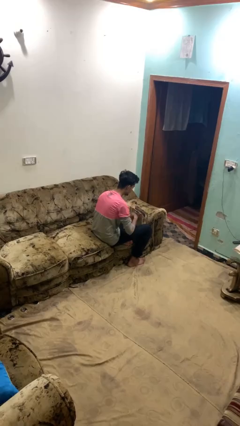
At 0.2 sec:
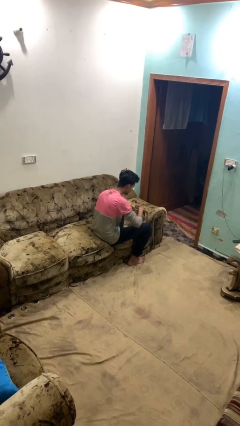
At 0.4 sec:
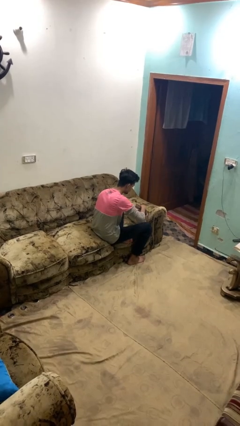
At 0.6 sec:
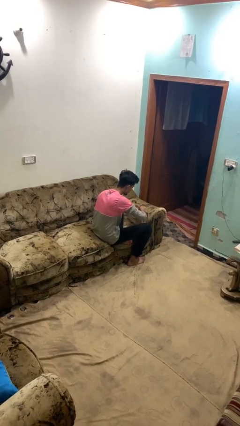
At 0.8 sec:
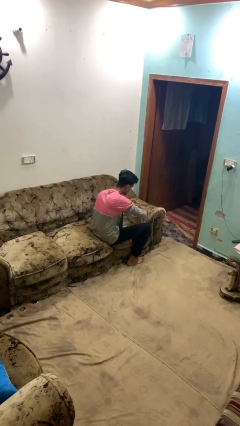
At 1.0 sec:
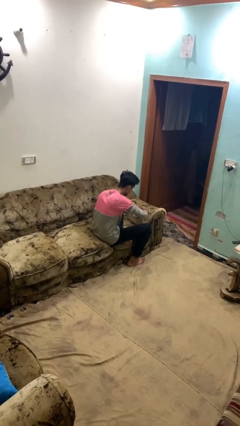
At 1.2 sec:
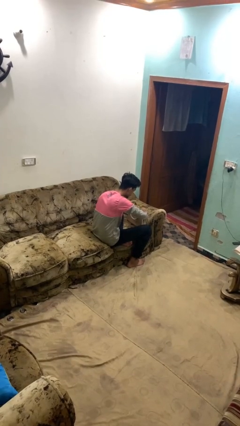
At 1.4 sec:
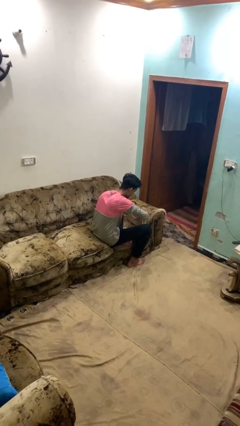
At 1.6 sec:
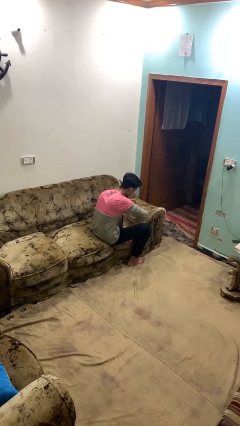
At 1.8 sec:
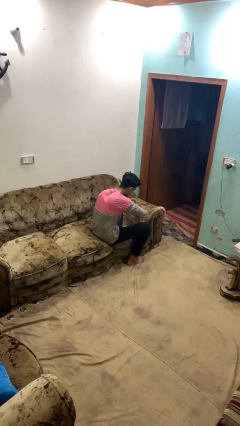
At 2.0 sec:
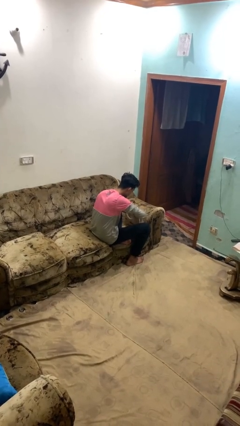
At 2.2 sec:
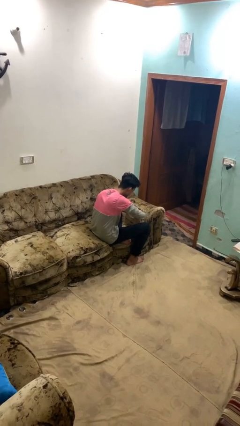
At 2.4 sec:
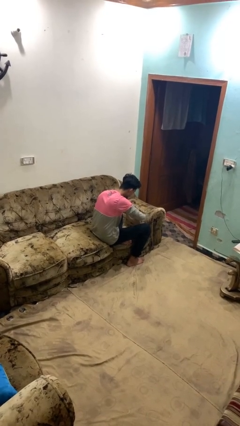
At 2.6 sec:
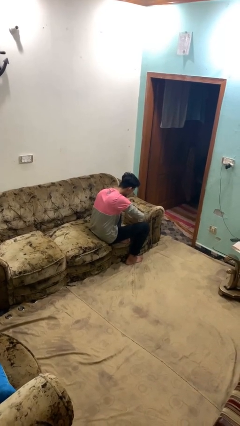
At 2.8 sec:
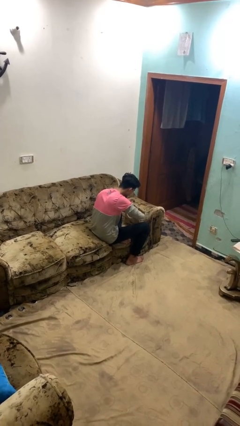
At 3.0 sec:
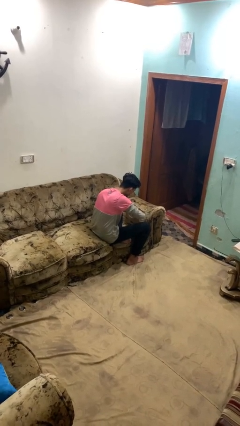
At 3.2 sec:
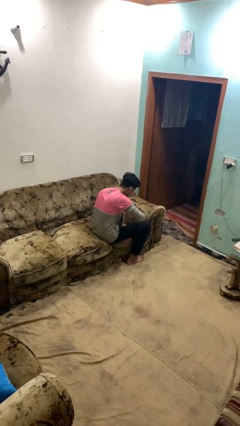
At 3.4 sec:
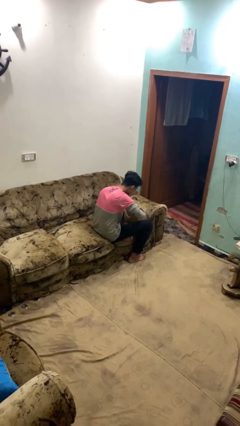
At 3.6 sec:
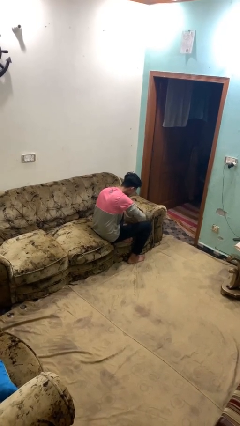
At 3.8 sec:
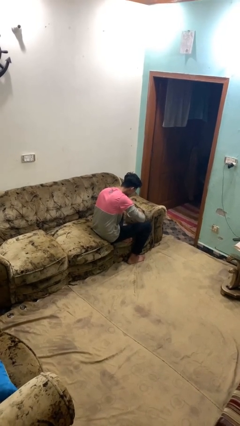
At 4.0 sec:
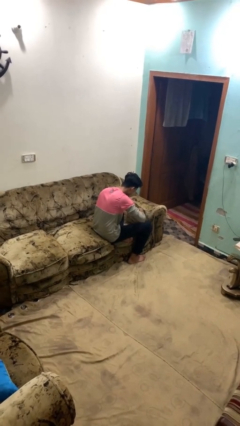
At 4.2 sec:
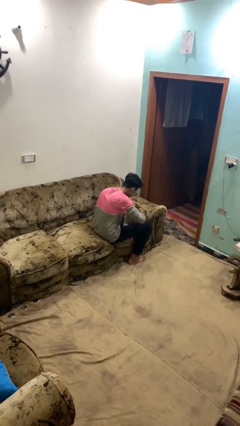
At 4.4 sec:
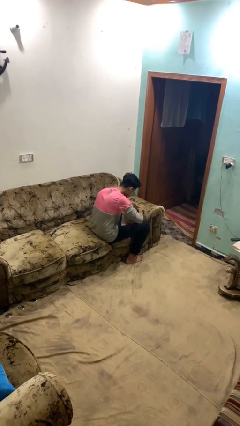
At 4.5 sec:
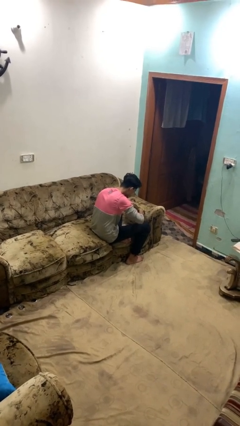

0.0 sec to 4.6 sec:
person searches in purse

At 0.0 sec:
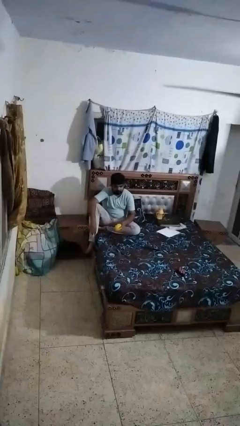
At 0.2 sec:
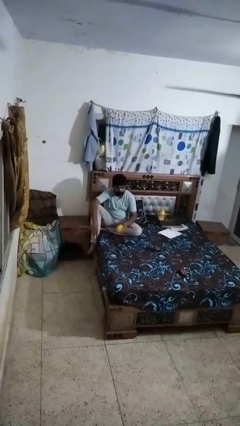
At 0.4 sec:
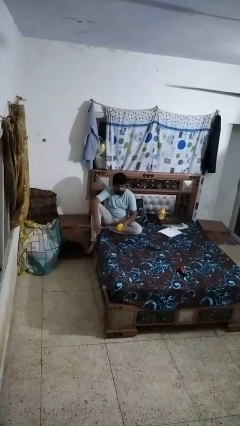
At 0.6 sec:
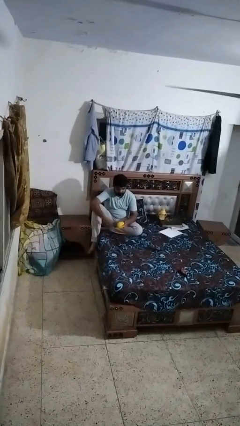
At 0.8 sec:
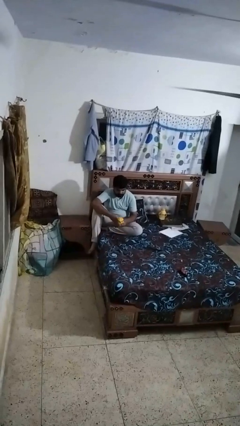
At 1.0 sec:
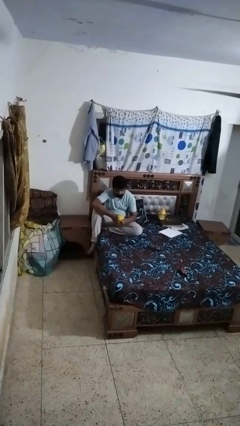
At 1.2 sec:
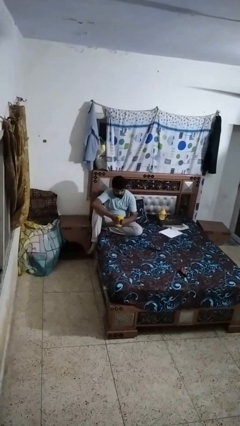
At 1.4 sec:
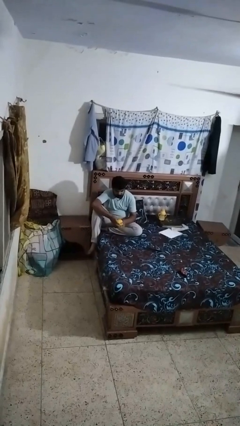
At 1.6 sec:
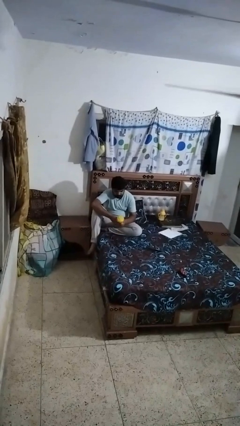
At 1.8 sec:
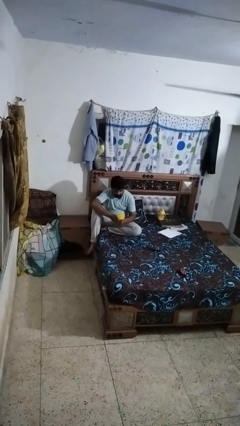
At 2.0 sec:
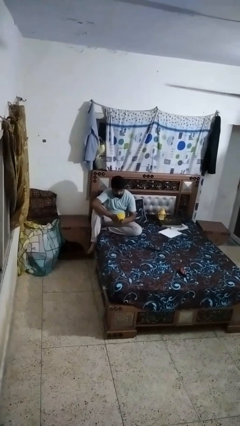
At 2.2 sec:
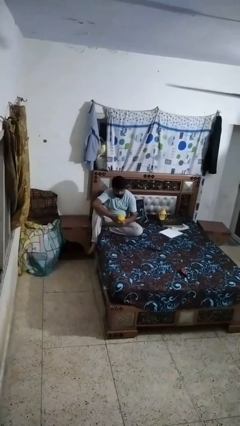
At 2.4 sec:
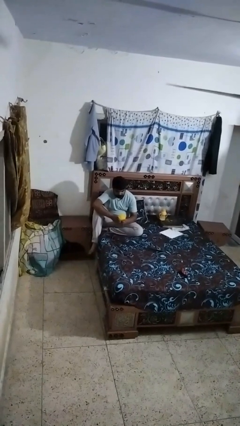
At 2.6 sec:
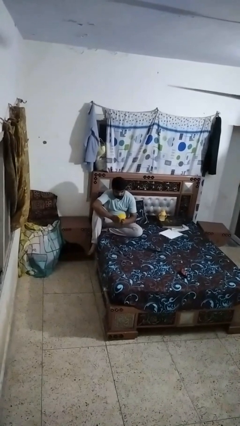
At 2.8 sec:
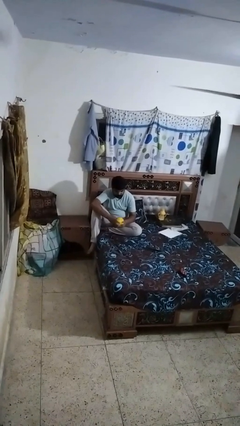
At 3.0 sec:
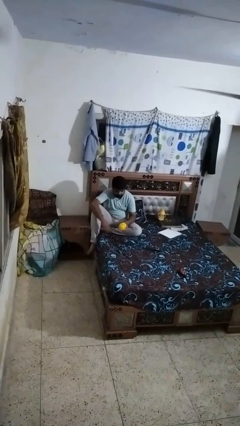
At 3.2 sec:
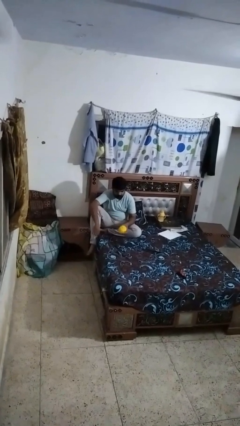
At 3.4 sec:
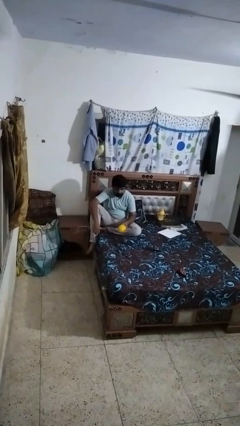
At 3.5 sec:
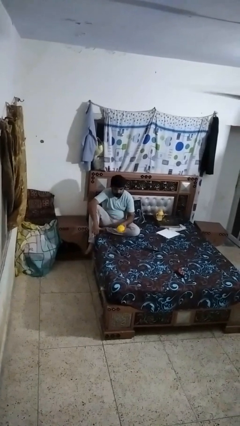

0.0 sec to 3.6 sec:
person squeezes object

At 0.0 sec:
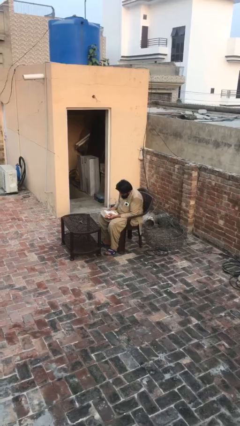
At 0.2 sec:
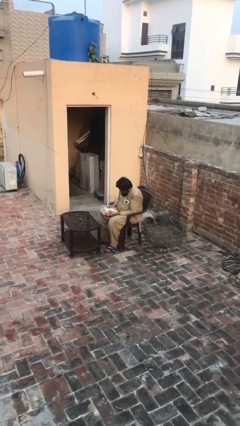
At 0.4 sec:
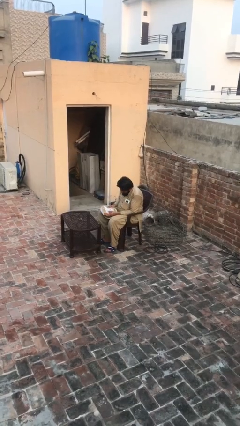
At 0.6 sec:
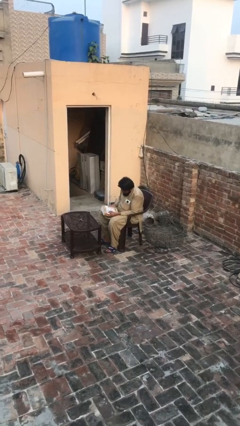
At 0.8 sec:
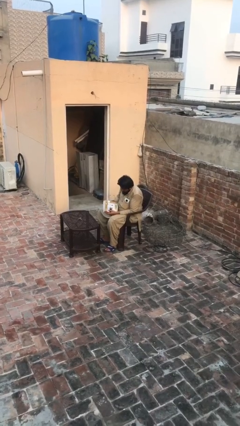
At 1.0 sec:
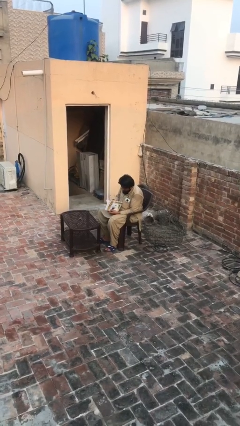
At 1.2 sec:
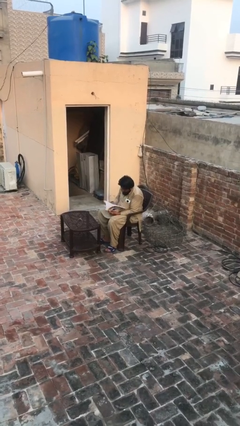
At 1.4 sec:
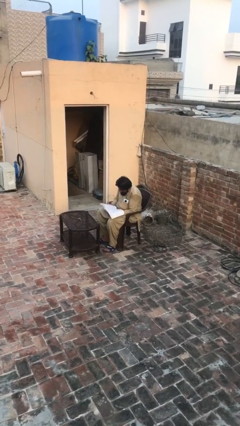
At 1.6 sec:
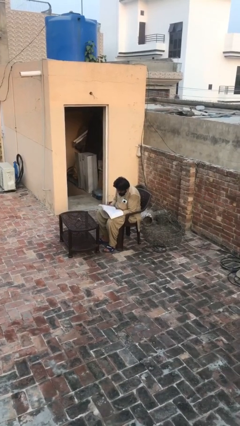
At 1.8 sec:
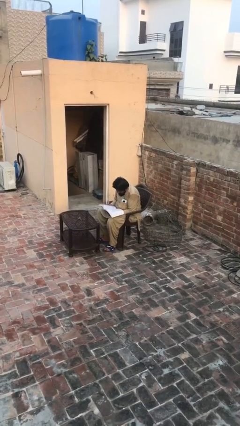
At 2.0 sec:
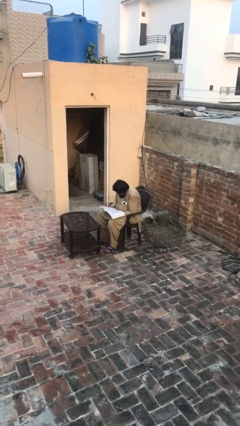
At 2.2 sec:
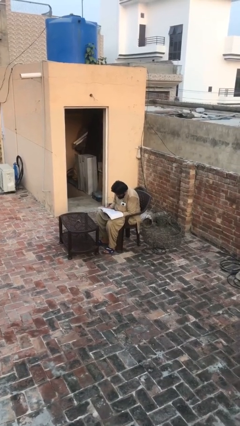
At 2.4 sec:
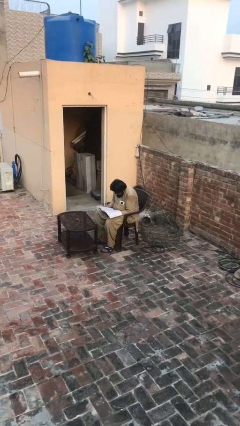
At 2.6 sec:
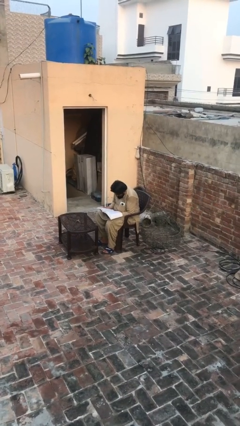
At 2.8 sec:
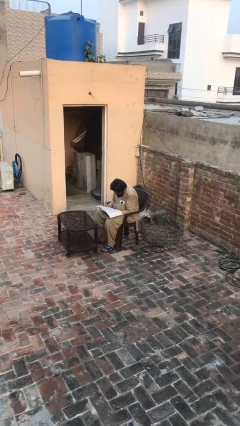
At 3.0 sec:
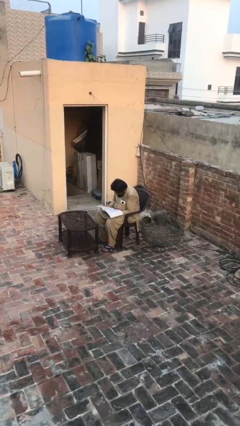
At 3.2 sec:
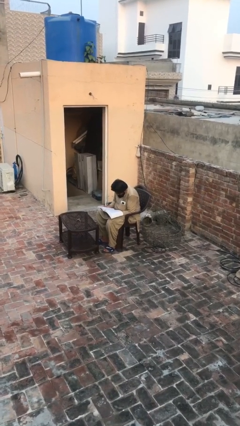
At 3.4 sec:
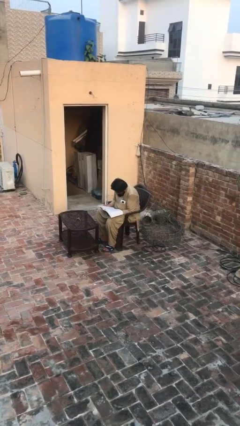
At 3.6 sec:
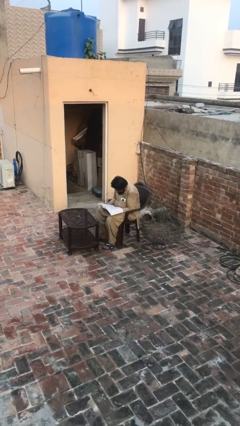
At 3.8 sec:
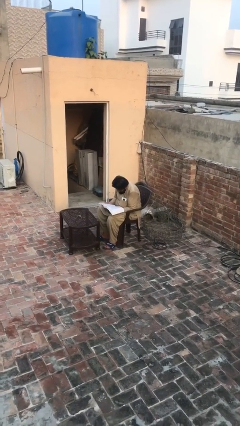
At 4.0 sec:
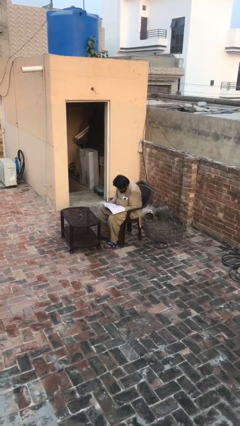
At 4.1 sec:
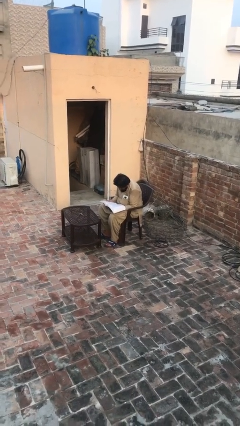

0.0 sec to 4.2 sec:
person reads document

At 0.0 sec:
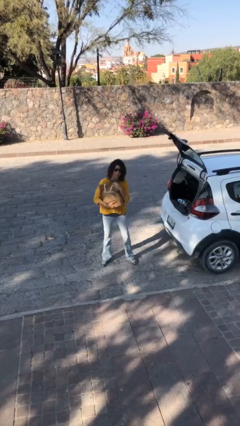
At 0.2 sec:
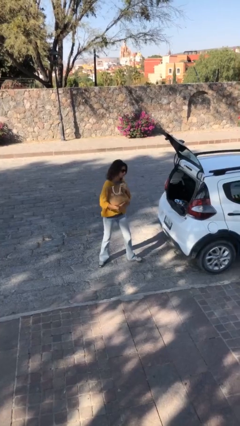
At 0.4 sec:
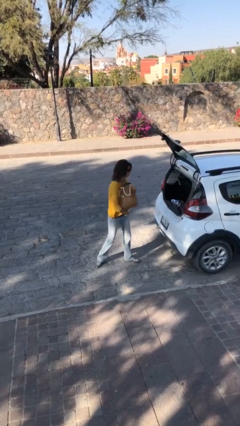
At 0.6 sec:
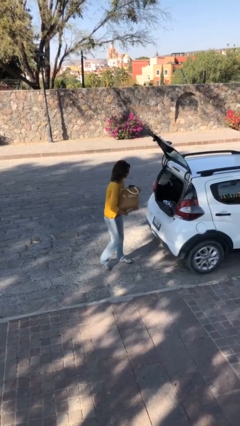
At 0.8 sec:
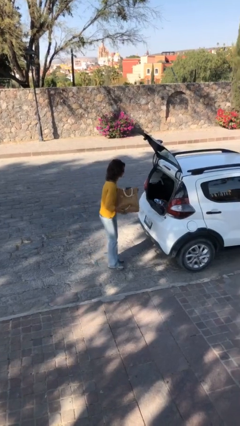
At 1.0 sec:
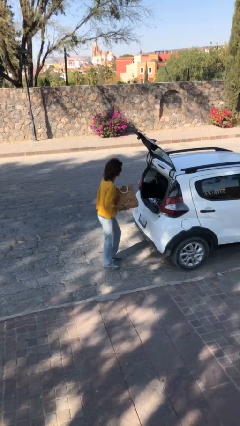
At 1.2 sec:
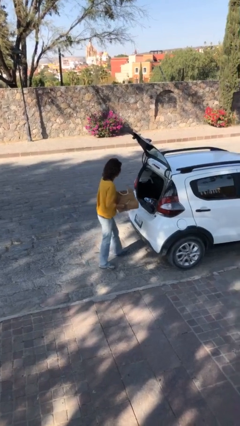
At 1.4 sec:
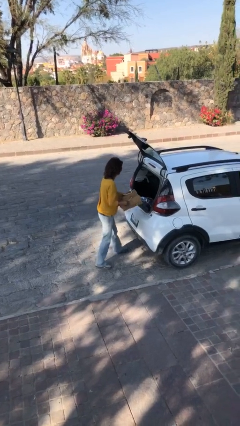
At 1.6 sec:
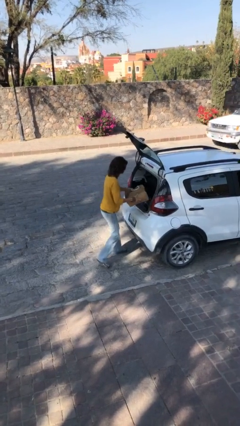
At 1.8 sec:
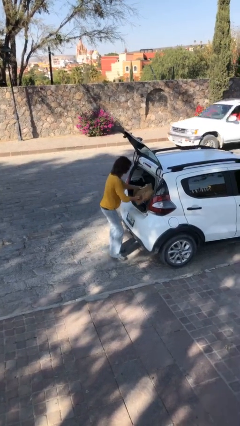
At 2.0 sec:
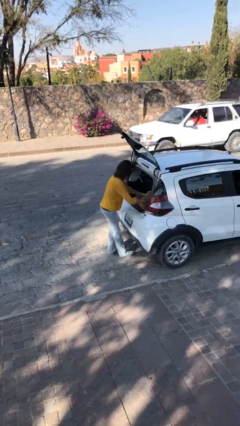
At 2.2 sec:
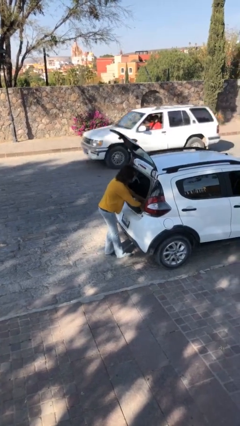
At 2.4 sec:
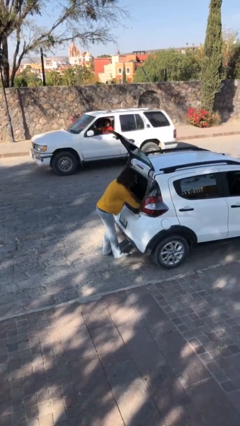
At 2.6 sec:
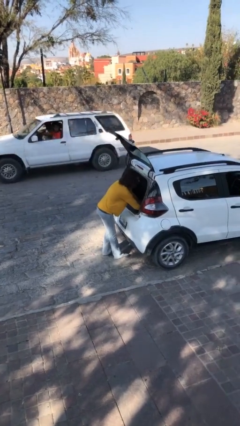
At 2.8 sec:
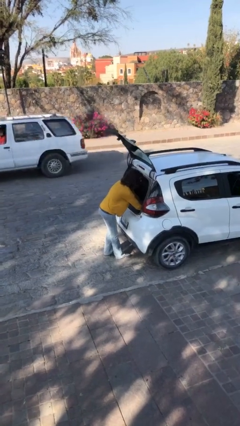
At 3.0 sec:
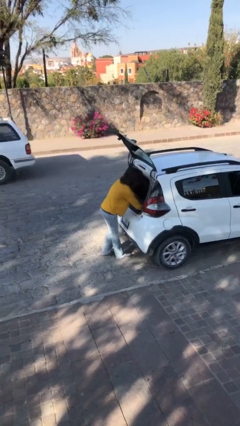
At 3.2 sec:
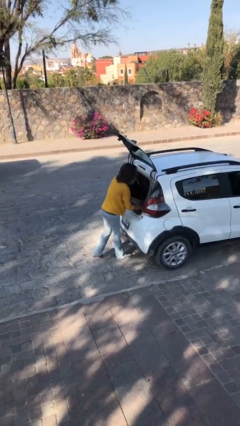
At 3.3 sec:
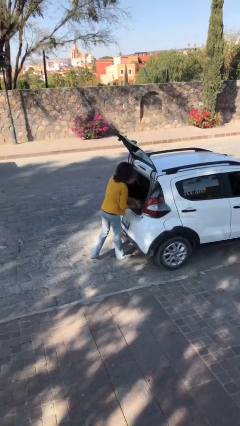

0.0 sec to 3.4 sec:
person loads car

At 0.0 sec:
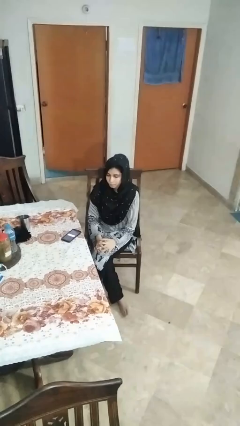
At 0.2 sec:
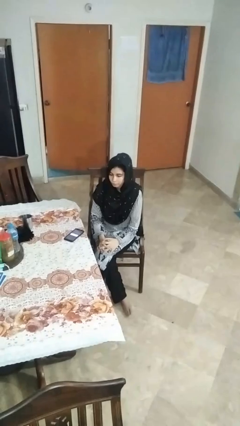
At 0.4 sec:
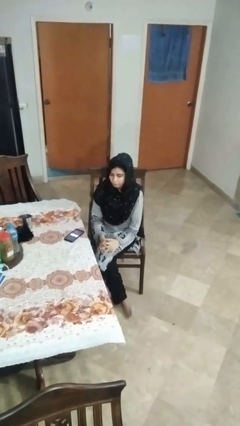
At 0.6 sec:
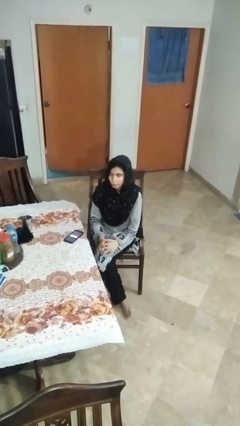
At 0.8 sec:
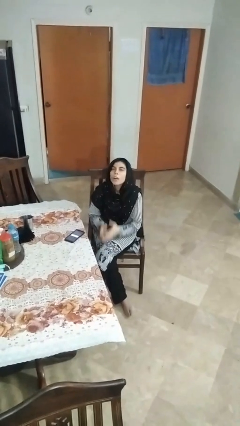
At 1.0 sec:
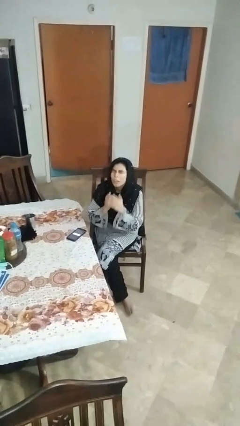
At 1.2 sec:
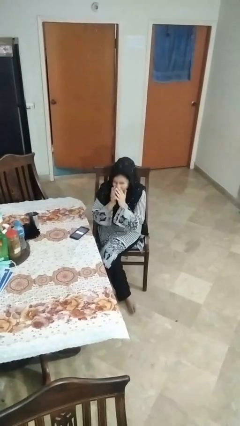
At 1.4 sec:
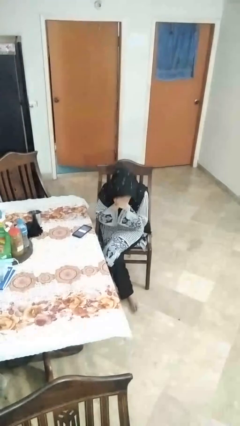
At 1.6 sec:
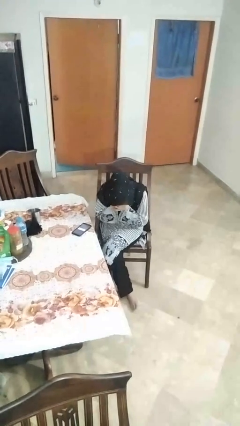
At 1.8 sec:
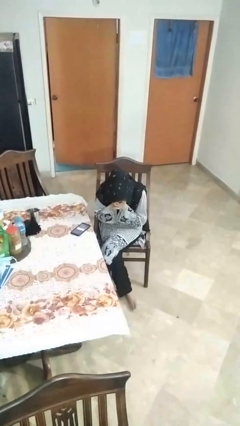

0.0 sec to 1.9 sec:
person sneezes into hand

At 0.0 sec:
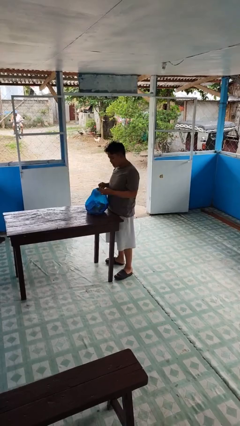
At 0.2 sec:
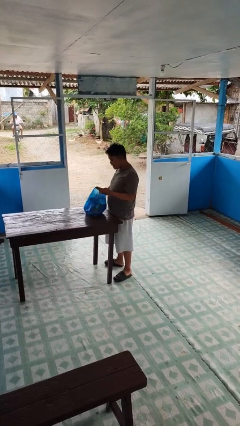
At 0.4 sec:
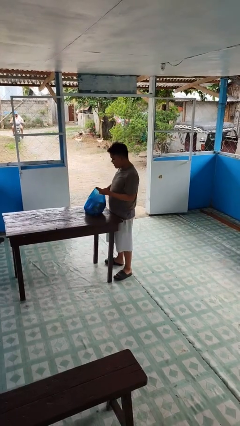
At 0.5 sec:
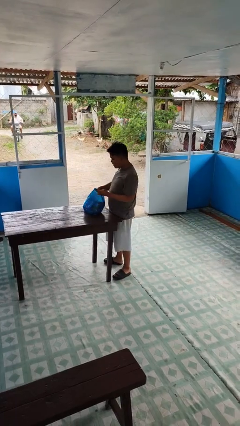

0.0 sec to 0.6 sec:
person puts object into bag
